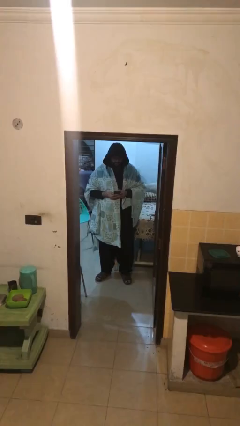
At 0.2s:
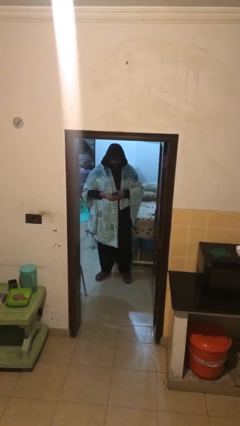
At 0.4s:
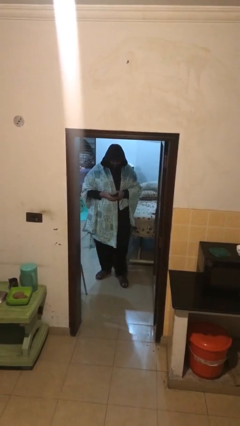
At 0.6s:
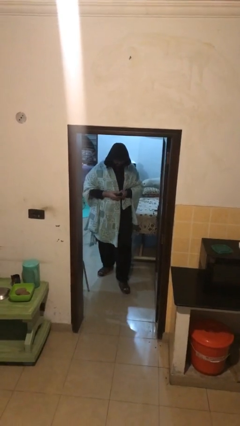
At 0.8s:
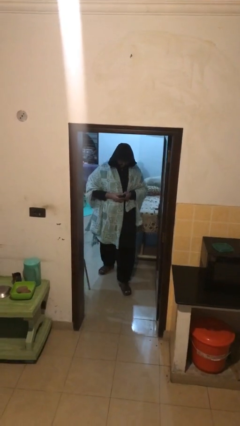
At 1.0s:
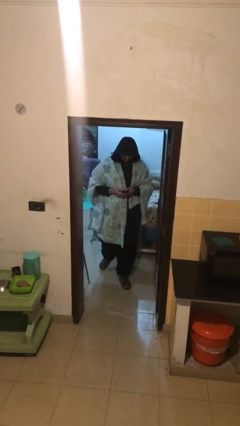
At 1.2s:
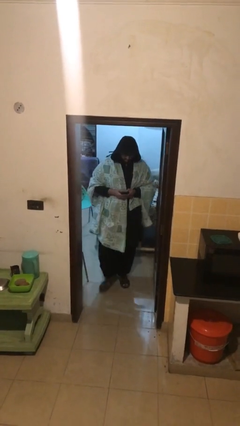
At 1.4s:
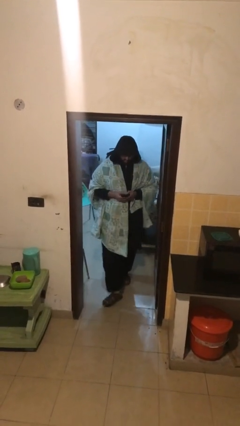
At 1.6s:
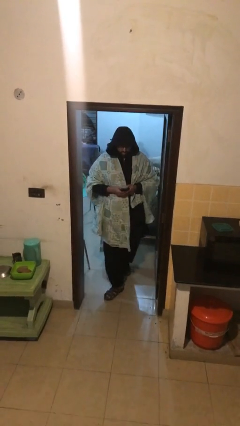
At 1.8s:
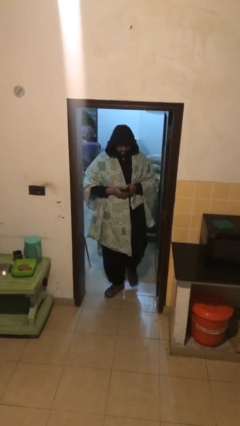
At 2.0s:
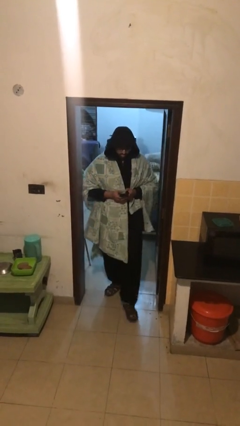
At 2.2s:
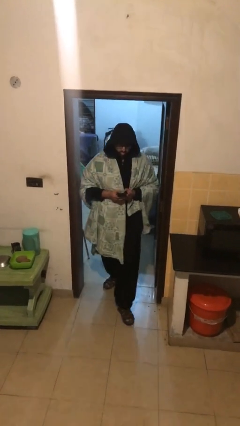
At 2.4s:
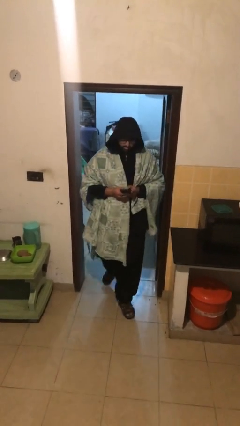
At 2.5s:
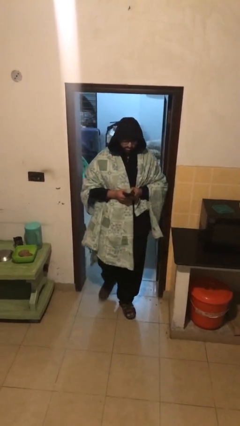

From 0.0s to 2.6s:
person enters scene through structure

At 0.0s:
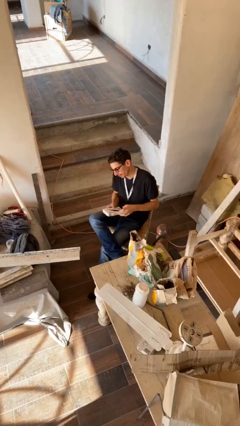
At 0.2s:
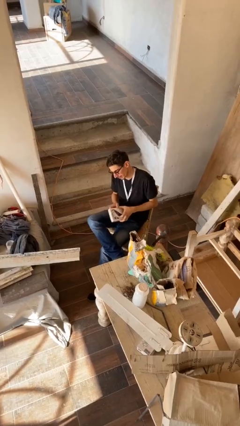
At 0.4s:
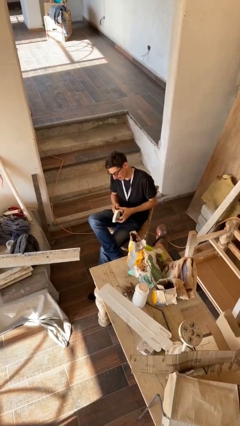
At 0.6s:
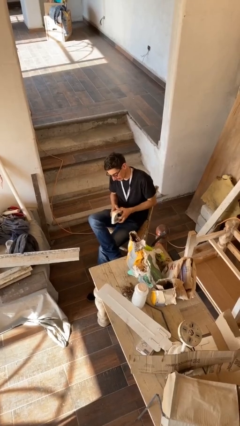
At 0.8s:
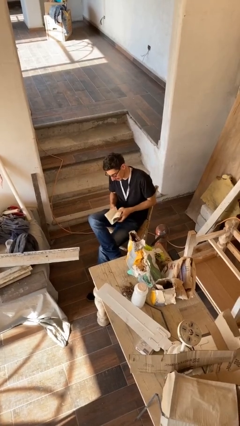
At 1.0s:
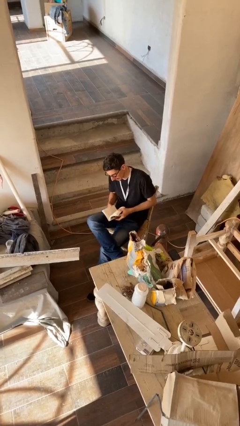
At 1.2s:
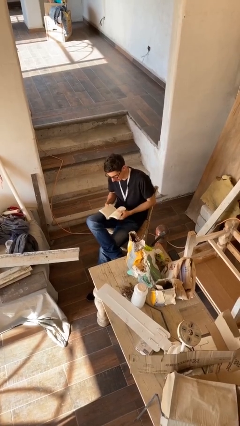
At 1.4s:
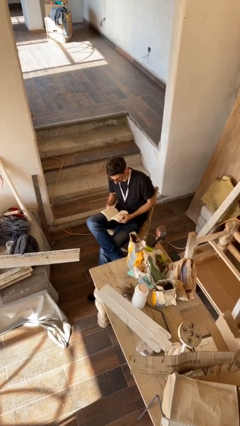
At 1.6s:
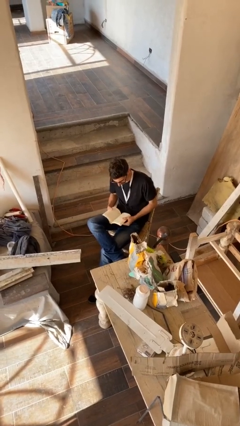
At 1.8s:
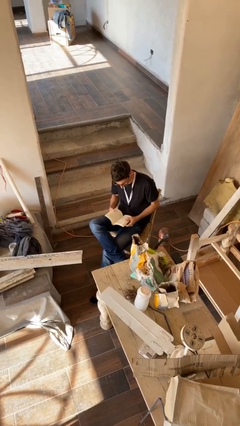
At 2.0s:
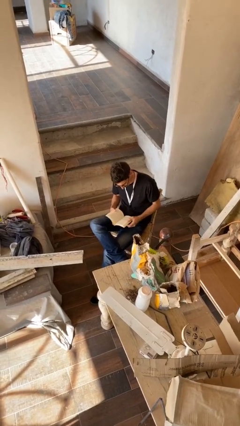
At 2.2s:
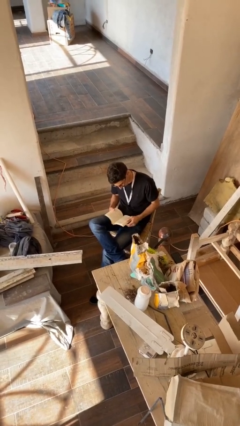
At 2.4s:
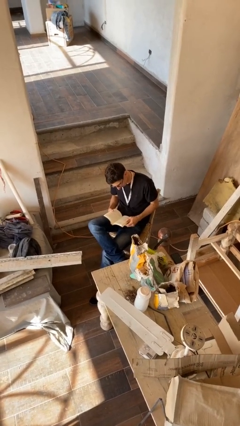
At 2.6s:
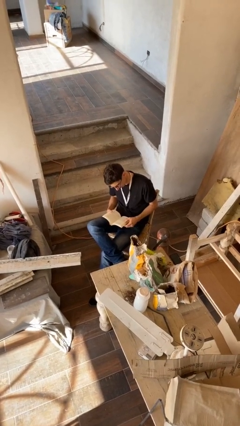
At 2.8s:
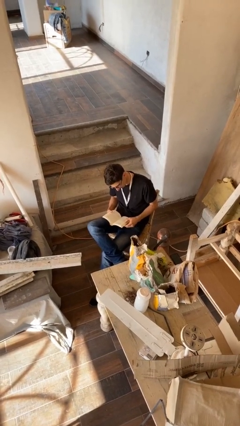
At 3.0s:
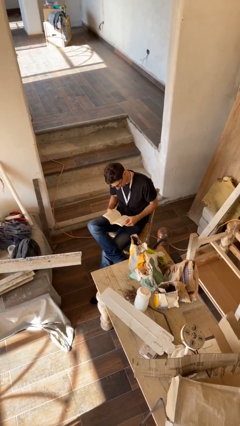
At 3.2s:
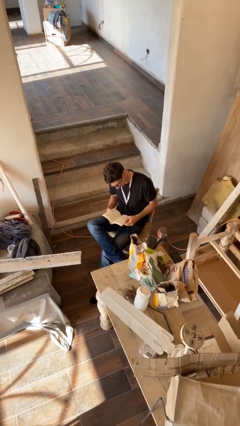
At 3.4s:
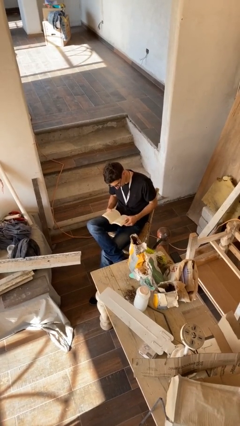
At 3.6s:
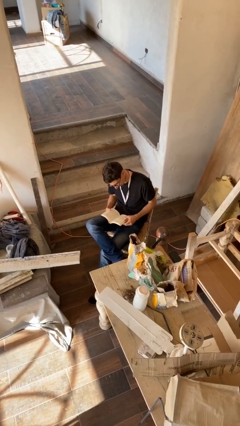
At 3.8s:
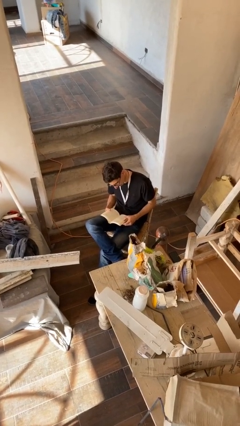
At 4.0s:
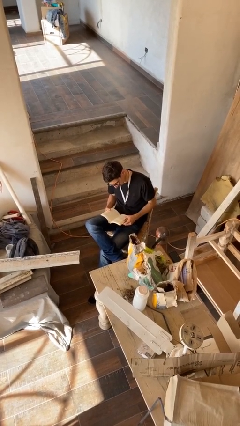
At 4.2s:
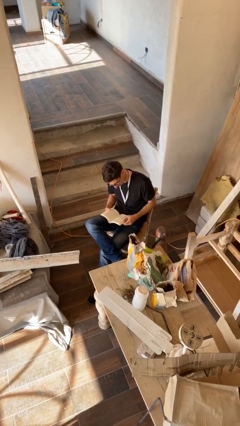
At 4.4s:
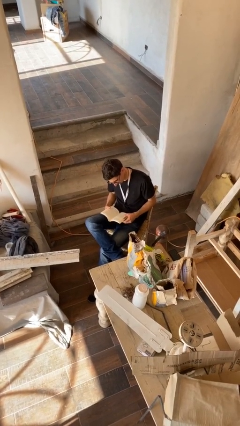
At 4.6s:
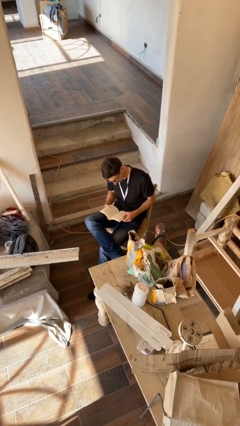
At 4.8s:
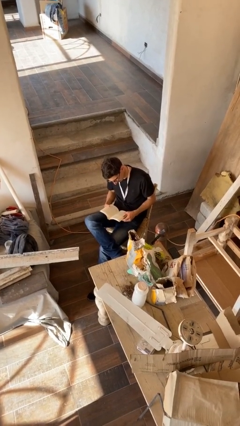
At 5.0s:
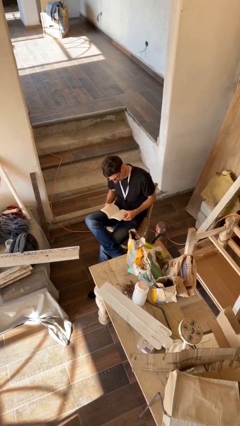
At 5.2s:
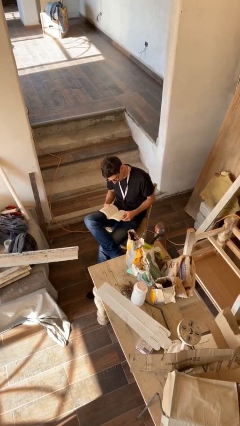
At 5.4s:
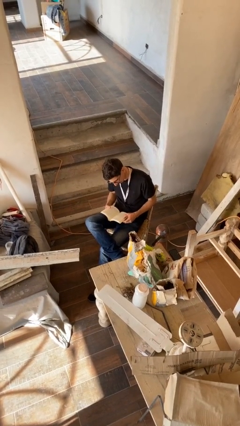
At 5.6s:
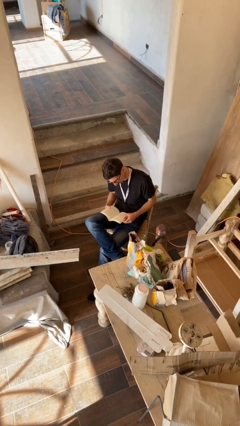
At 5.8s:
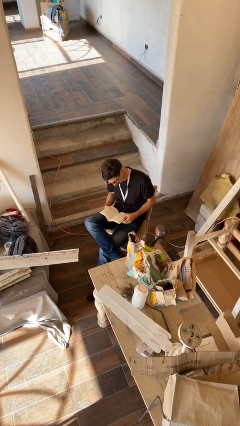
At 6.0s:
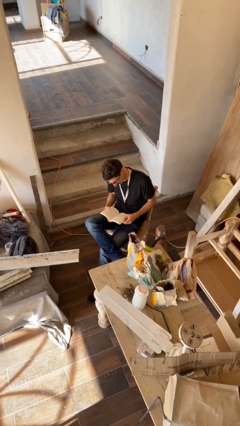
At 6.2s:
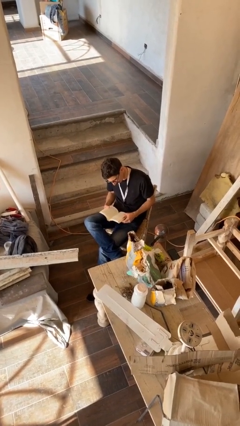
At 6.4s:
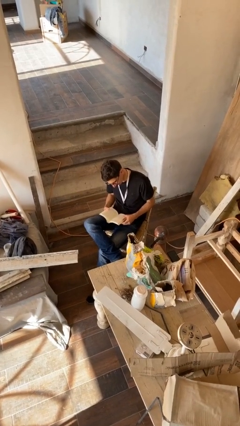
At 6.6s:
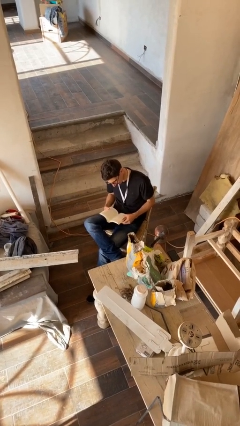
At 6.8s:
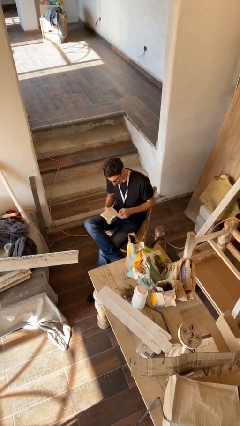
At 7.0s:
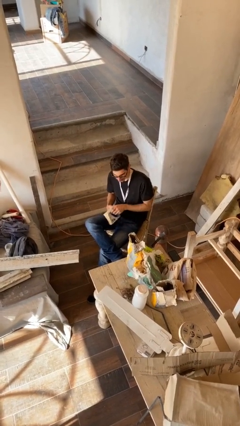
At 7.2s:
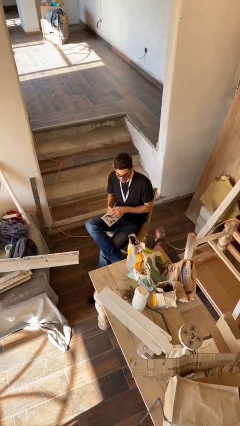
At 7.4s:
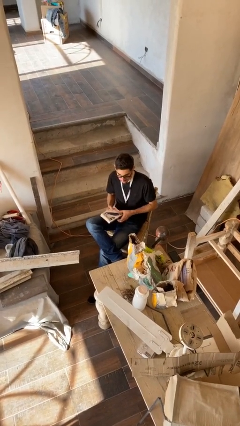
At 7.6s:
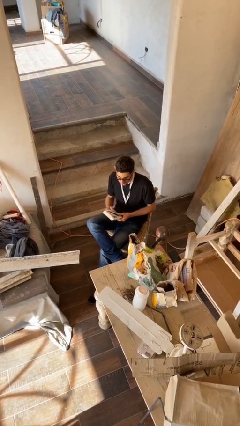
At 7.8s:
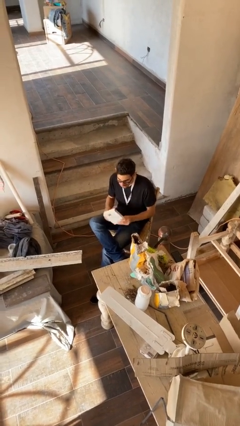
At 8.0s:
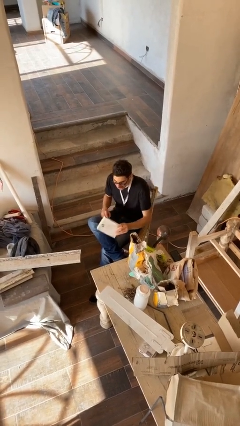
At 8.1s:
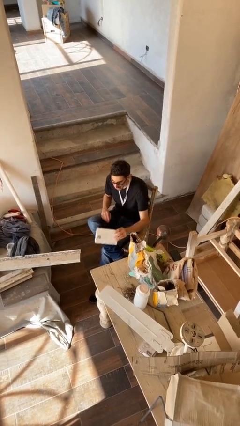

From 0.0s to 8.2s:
person reads document

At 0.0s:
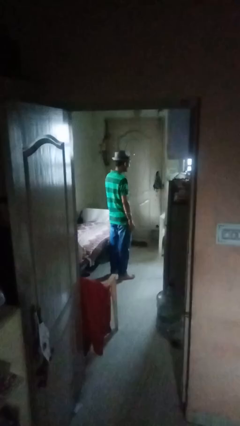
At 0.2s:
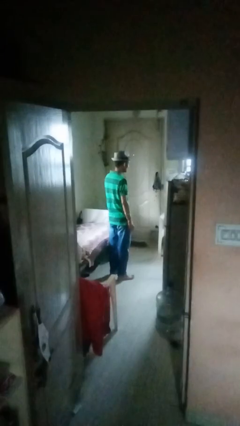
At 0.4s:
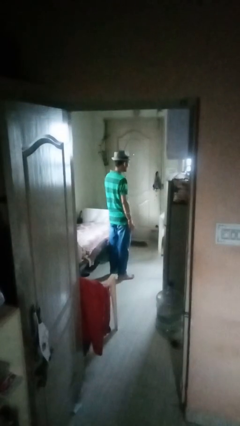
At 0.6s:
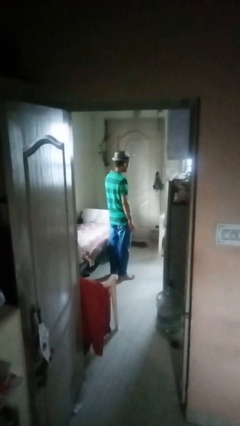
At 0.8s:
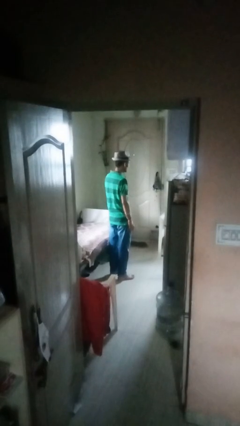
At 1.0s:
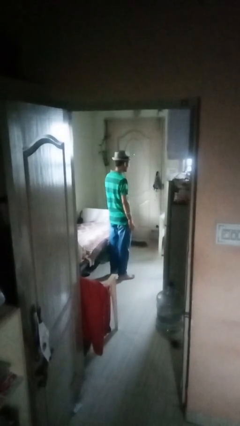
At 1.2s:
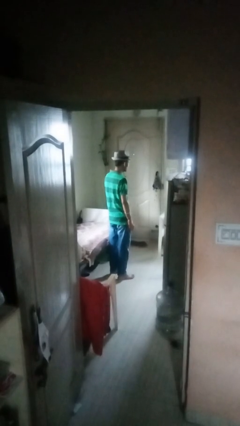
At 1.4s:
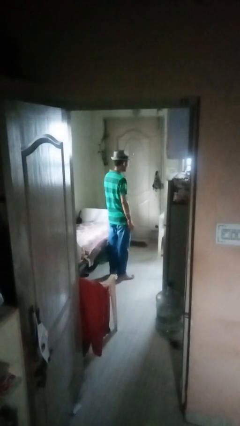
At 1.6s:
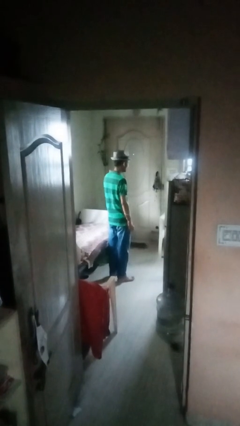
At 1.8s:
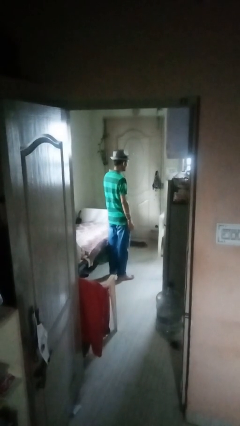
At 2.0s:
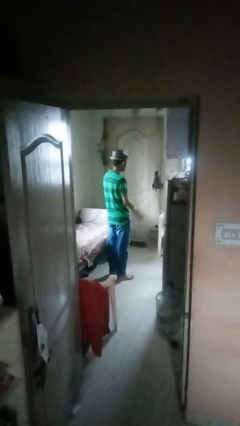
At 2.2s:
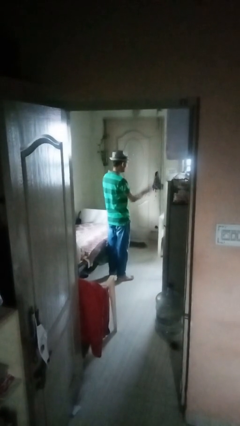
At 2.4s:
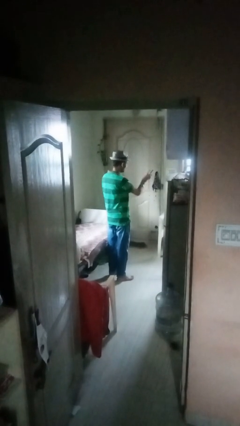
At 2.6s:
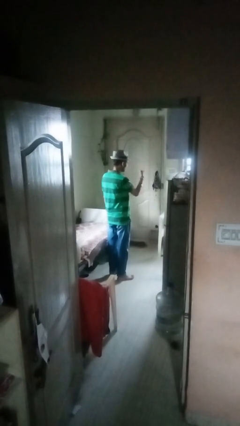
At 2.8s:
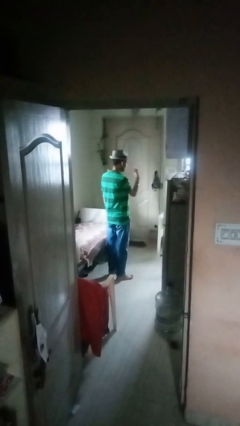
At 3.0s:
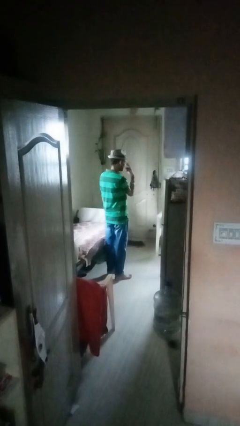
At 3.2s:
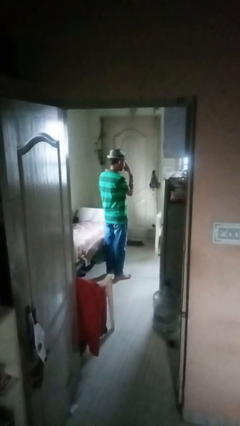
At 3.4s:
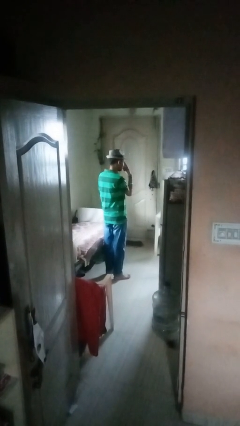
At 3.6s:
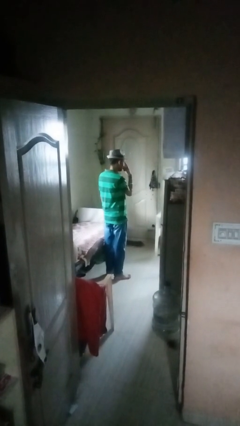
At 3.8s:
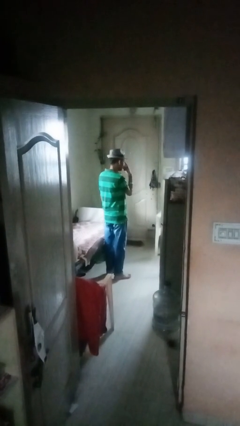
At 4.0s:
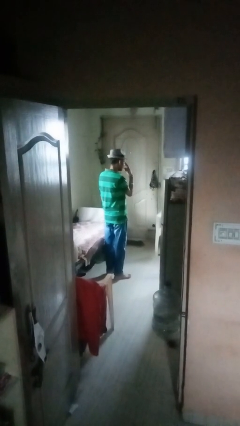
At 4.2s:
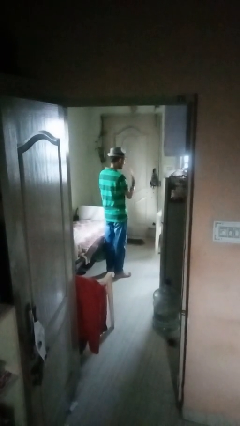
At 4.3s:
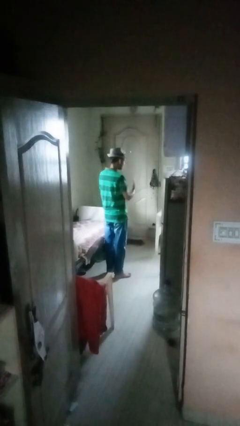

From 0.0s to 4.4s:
person gestures watch closely

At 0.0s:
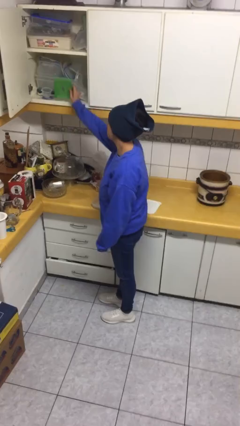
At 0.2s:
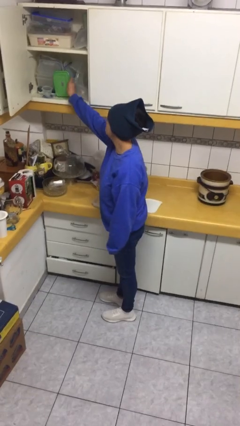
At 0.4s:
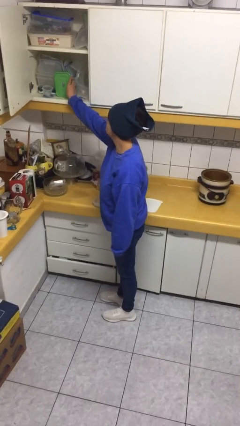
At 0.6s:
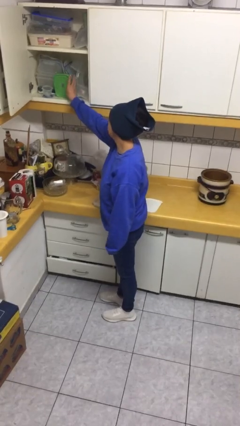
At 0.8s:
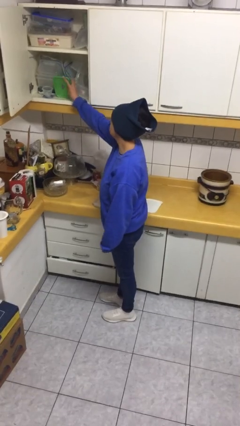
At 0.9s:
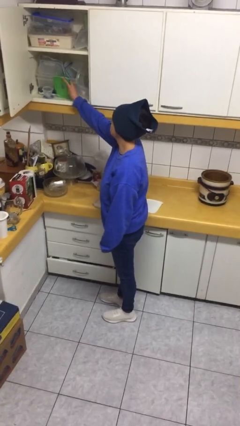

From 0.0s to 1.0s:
person puts object in cabinet

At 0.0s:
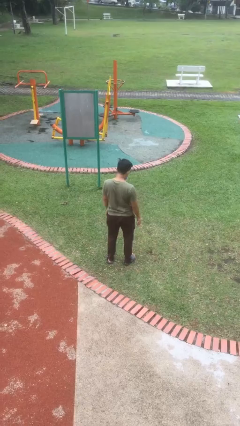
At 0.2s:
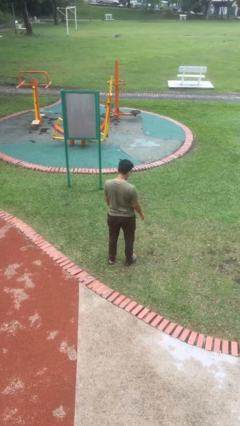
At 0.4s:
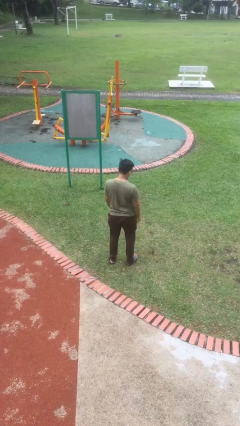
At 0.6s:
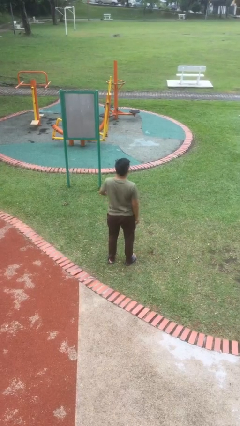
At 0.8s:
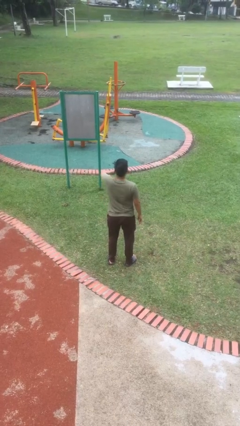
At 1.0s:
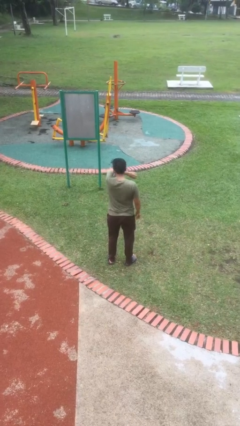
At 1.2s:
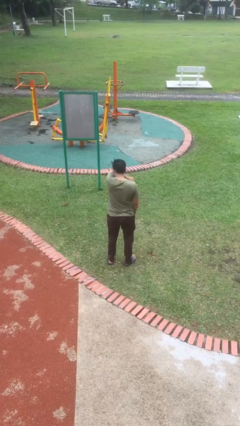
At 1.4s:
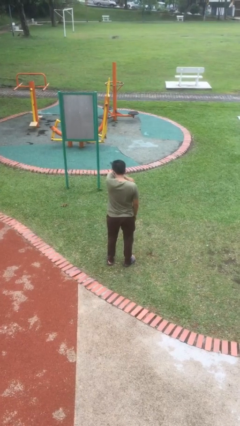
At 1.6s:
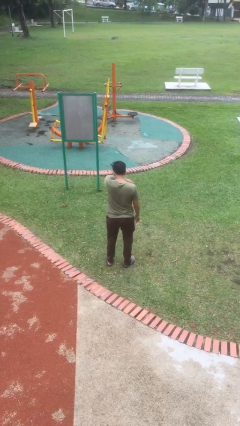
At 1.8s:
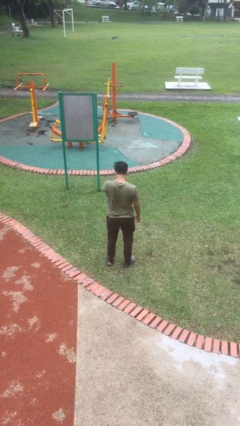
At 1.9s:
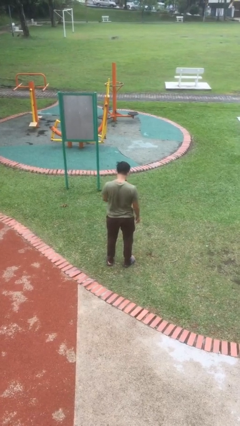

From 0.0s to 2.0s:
person sneezes into arm
